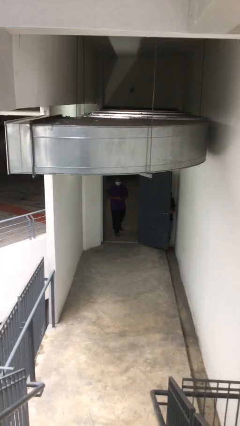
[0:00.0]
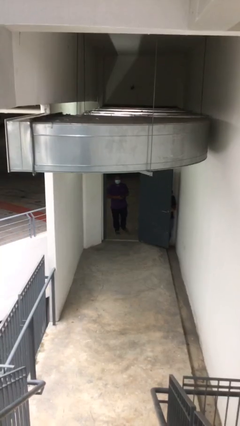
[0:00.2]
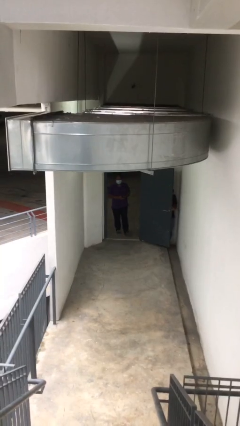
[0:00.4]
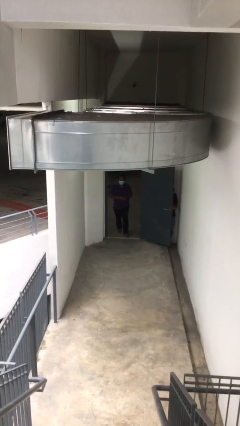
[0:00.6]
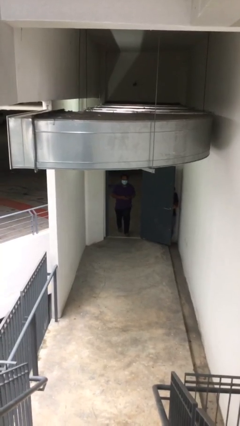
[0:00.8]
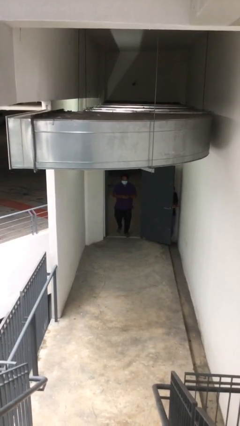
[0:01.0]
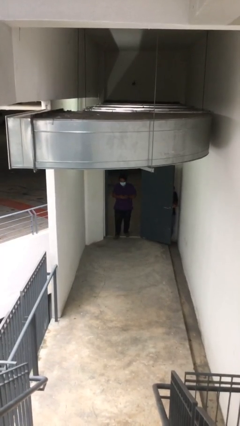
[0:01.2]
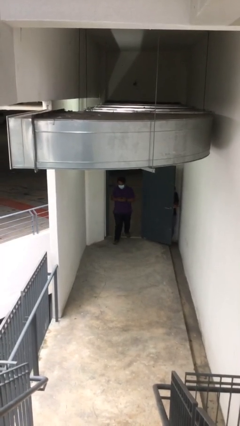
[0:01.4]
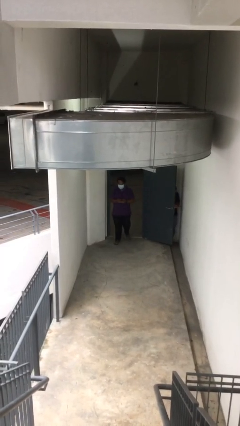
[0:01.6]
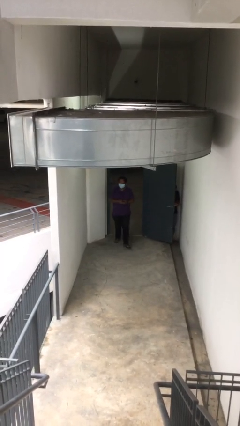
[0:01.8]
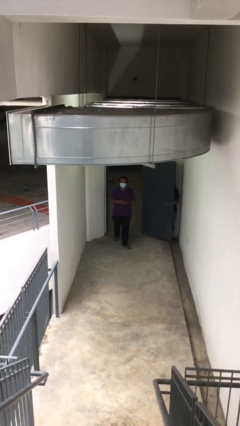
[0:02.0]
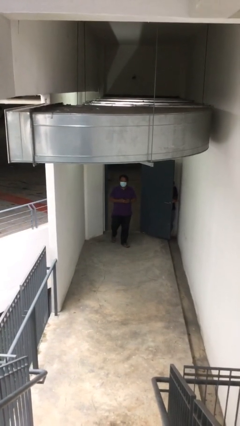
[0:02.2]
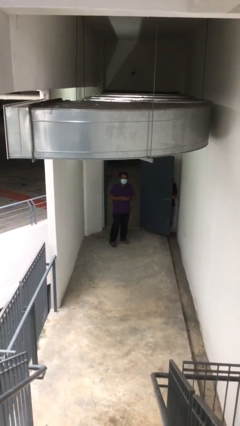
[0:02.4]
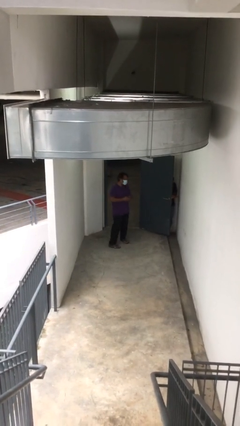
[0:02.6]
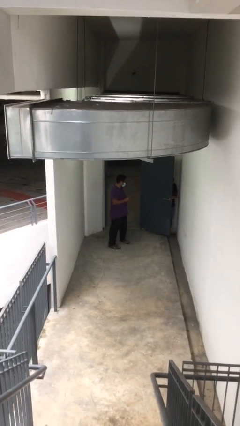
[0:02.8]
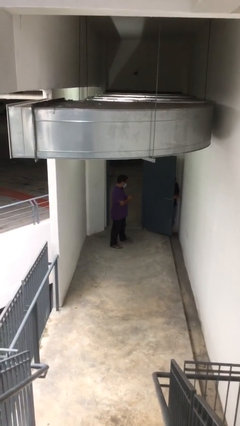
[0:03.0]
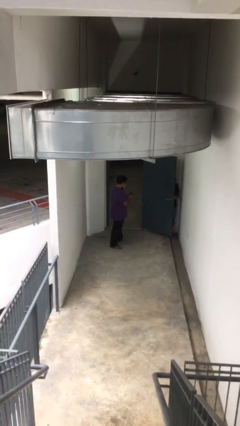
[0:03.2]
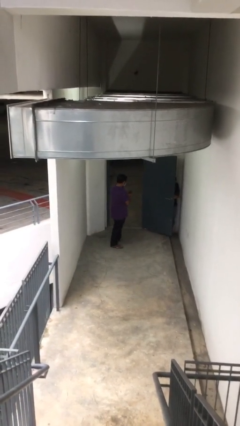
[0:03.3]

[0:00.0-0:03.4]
person enters scene through structure

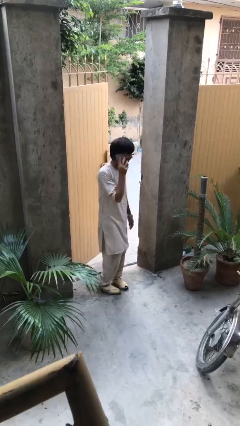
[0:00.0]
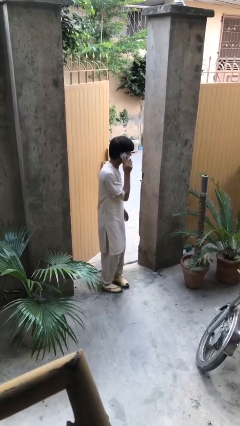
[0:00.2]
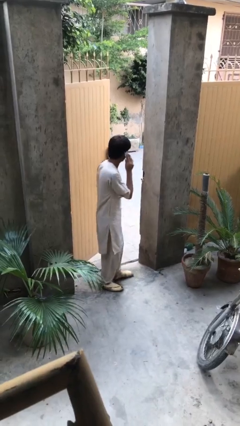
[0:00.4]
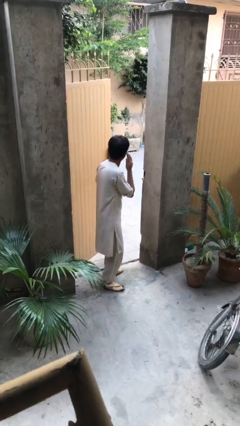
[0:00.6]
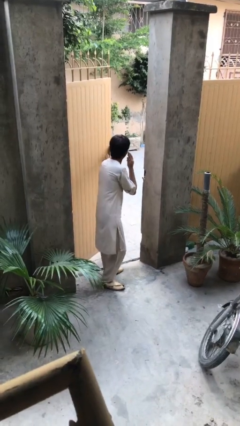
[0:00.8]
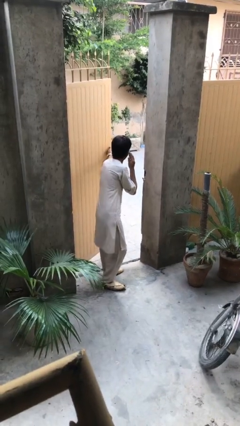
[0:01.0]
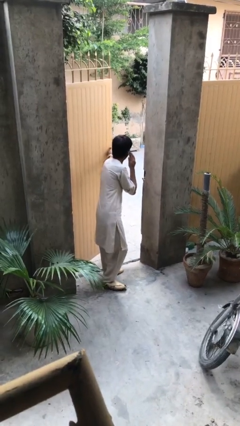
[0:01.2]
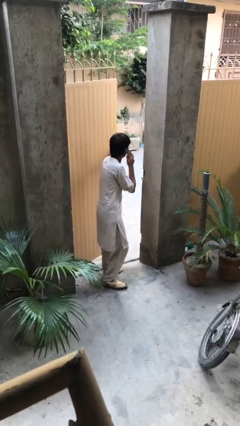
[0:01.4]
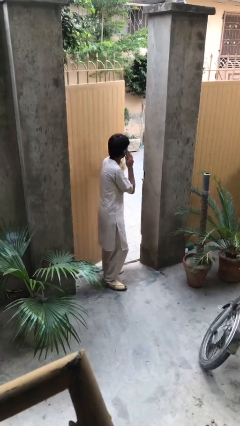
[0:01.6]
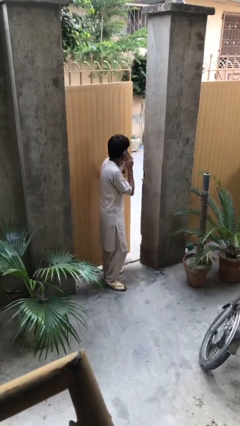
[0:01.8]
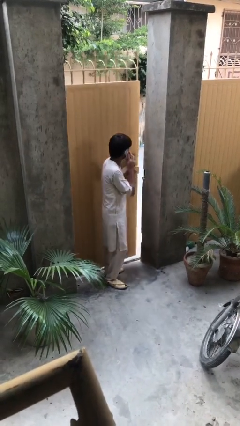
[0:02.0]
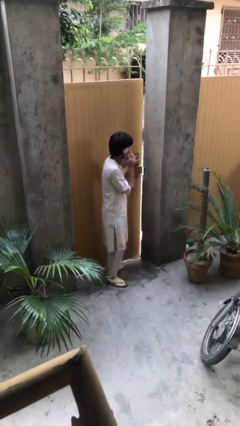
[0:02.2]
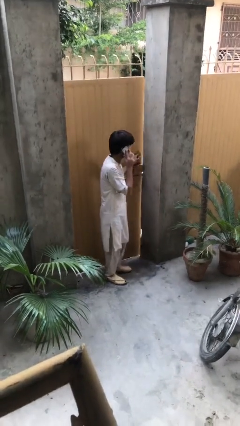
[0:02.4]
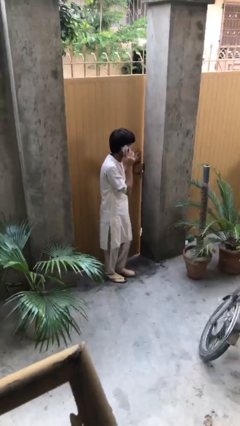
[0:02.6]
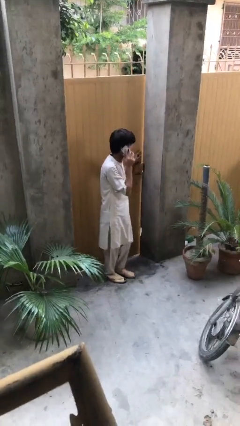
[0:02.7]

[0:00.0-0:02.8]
person closes facility door

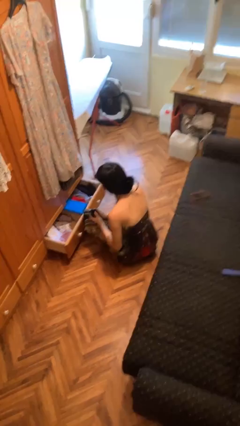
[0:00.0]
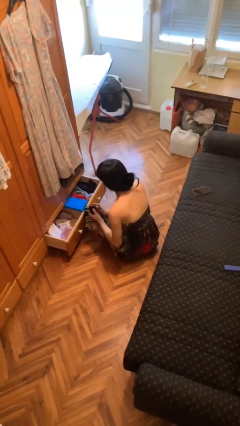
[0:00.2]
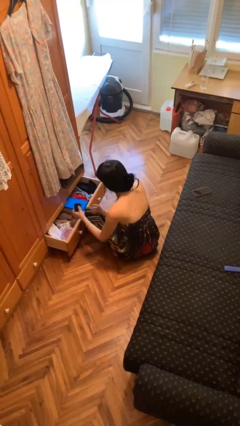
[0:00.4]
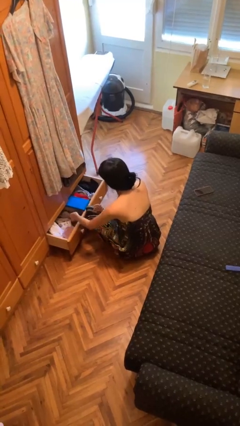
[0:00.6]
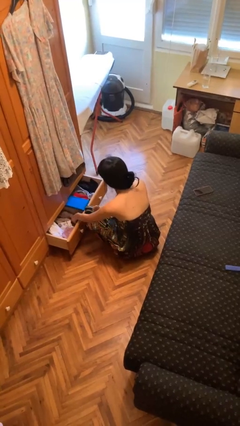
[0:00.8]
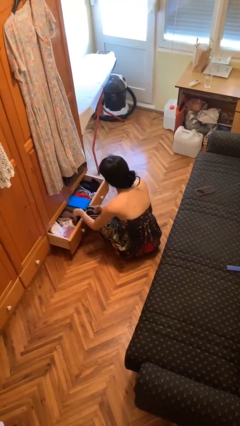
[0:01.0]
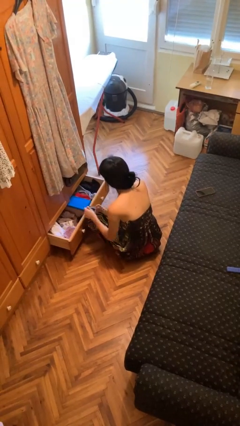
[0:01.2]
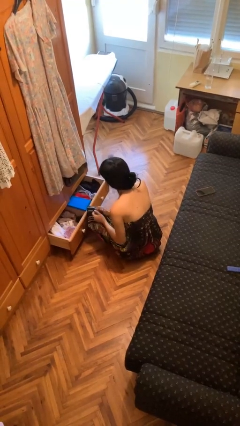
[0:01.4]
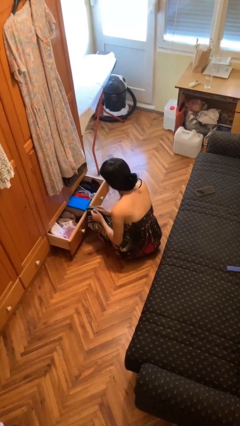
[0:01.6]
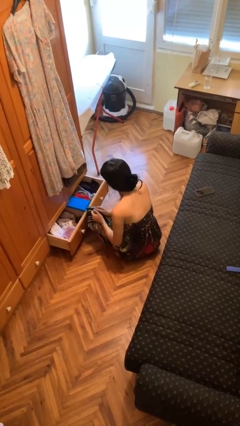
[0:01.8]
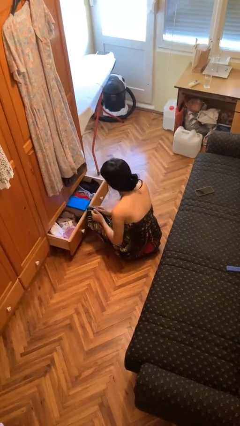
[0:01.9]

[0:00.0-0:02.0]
person puts clothes into dresser

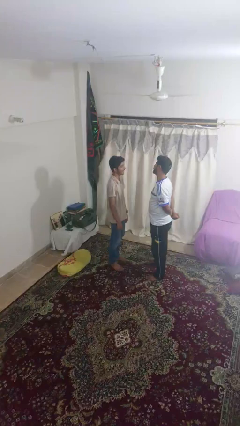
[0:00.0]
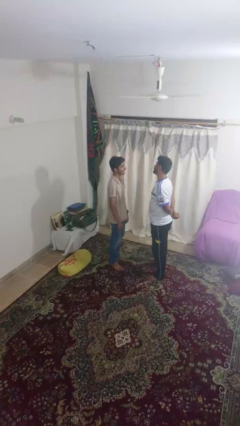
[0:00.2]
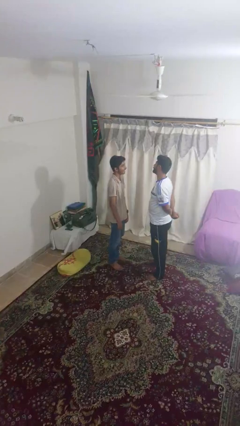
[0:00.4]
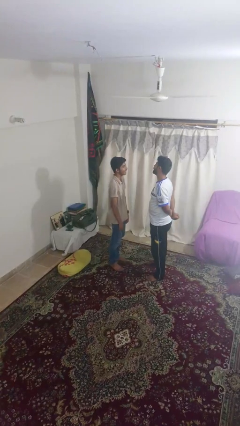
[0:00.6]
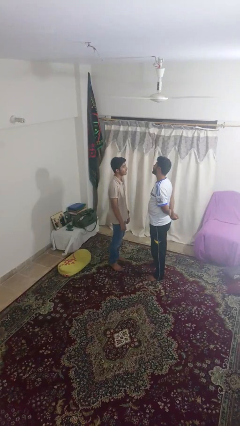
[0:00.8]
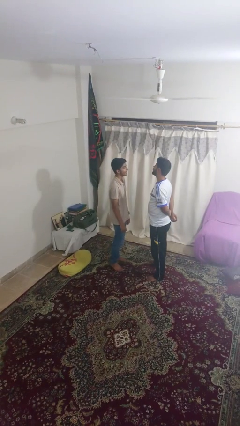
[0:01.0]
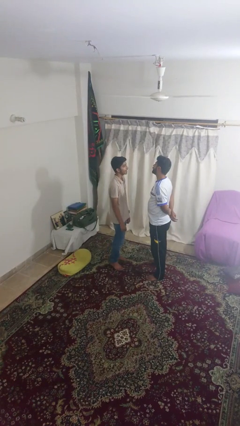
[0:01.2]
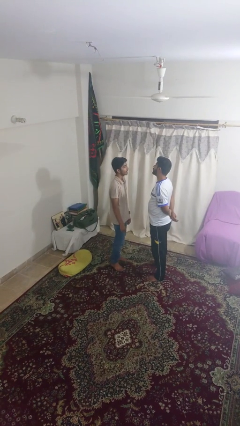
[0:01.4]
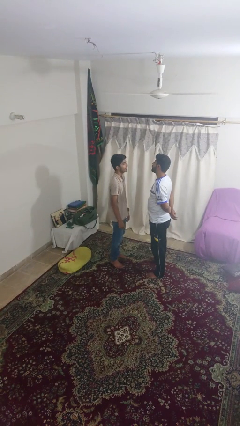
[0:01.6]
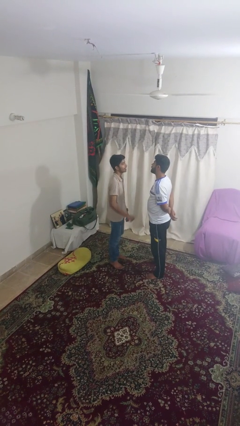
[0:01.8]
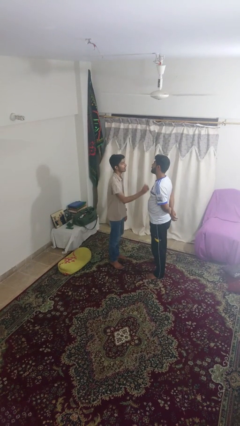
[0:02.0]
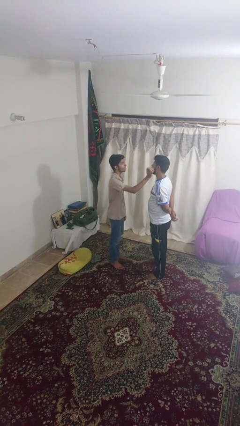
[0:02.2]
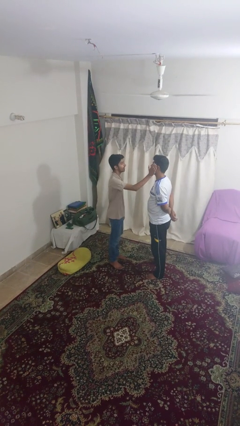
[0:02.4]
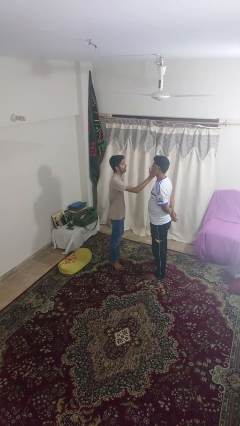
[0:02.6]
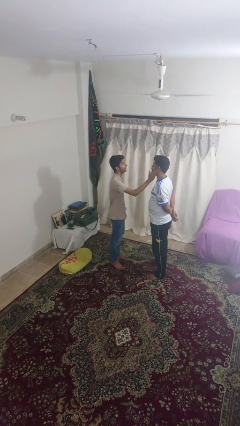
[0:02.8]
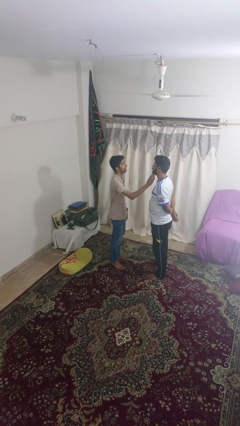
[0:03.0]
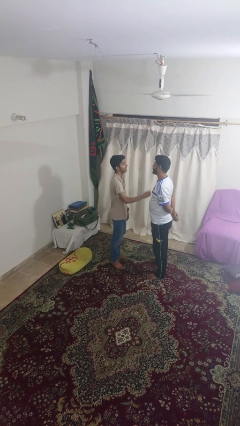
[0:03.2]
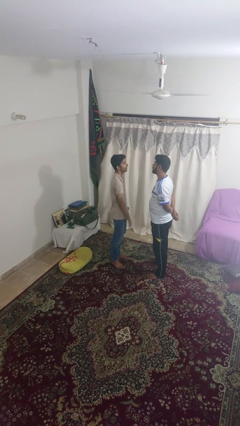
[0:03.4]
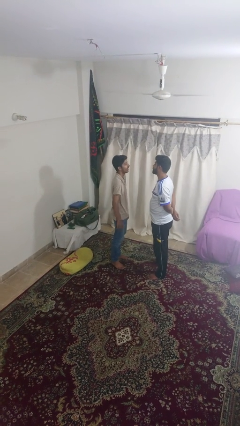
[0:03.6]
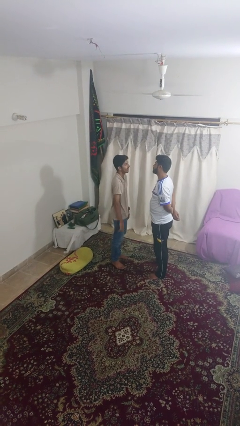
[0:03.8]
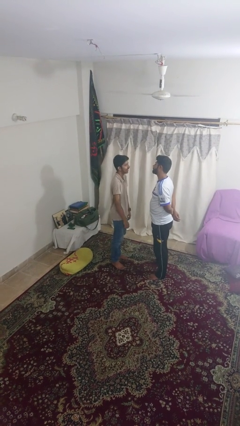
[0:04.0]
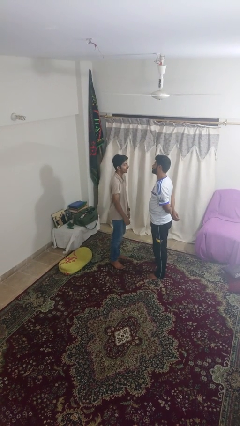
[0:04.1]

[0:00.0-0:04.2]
person touches face of person

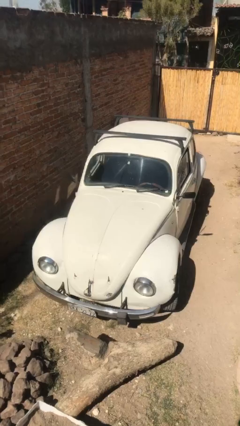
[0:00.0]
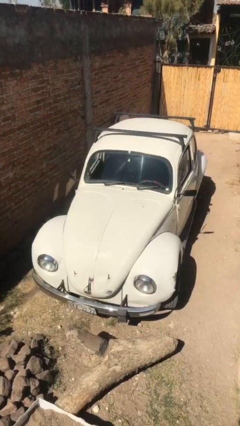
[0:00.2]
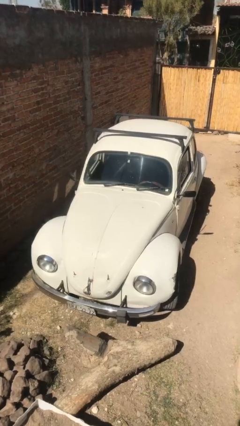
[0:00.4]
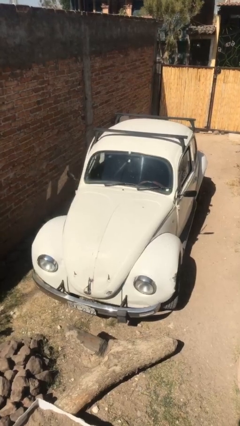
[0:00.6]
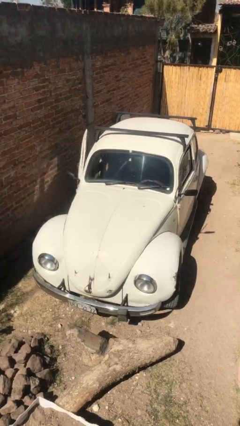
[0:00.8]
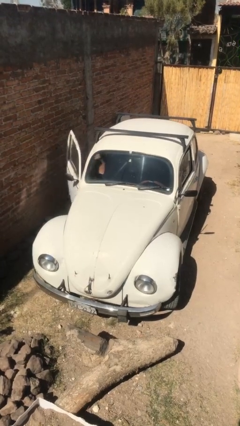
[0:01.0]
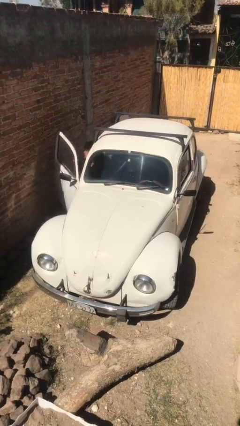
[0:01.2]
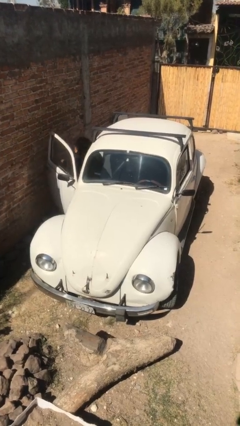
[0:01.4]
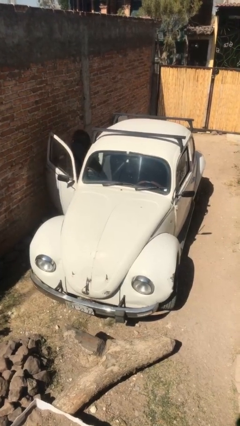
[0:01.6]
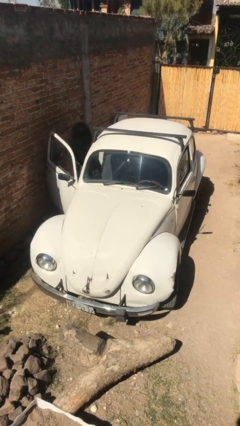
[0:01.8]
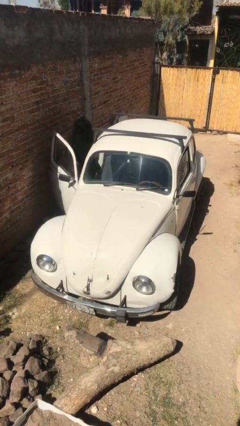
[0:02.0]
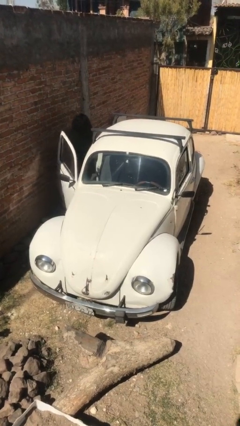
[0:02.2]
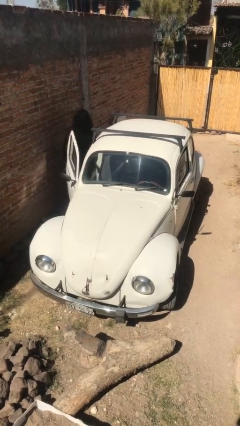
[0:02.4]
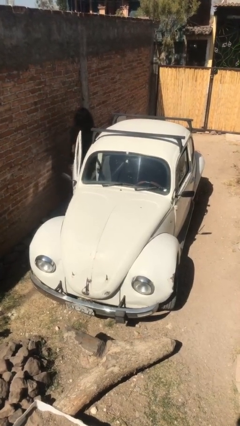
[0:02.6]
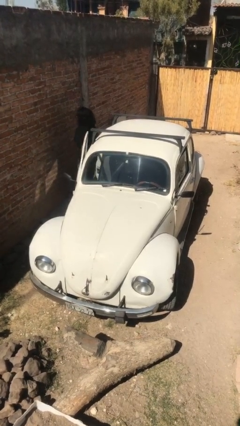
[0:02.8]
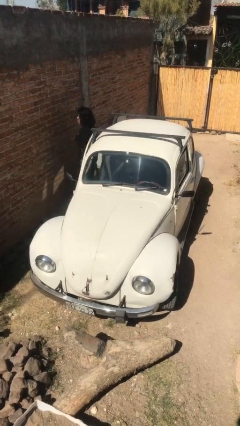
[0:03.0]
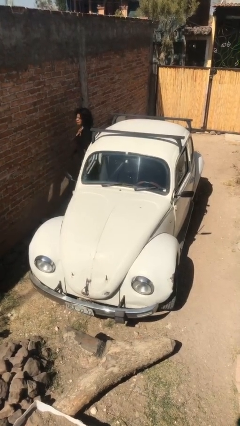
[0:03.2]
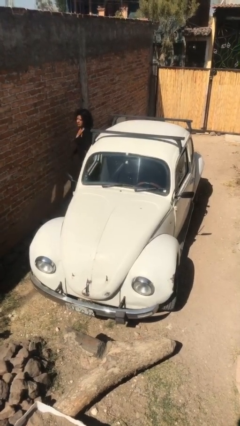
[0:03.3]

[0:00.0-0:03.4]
car drops off person

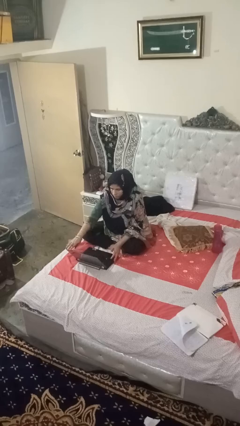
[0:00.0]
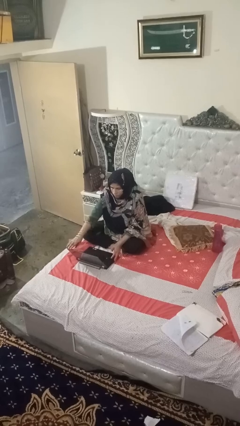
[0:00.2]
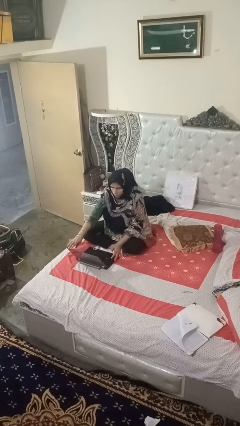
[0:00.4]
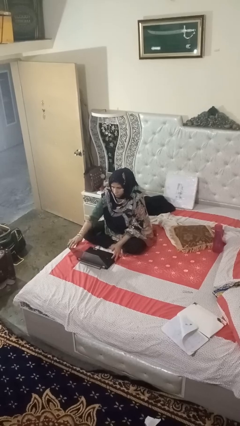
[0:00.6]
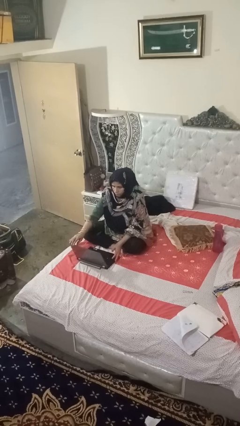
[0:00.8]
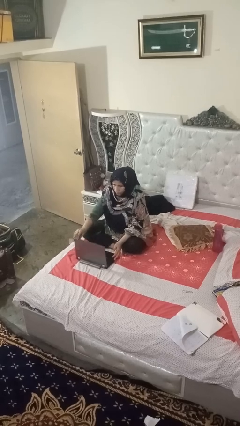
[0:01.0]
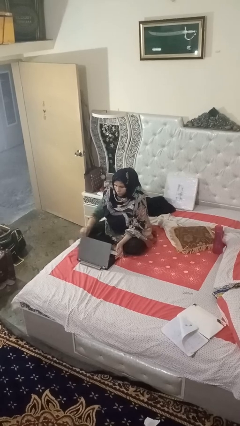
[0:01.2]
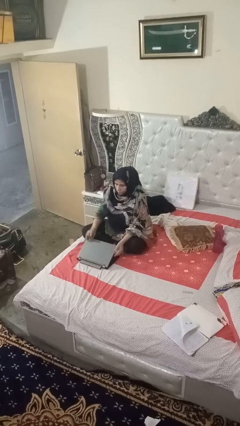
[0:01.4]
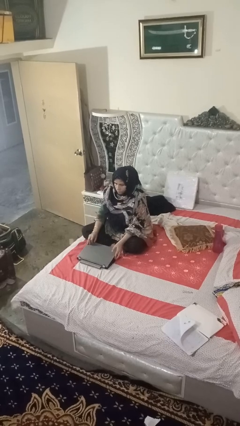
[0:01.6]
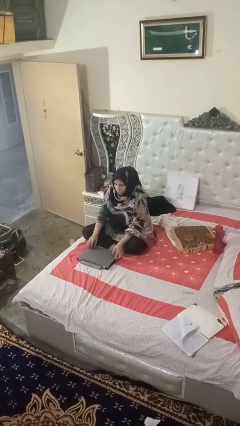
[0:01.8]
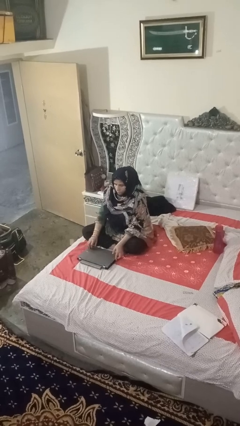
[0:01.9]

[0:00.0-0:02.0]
person closes laptop
